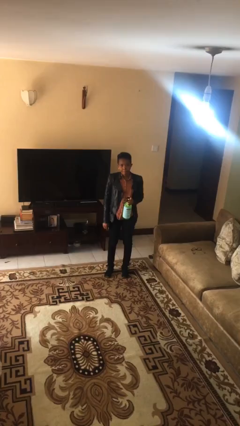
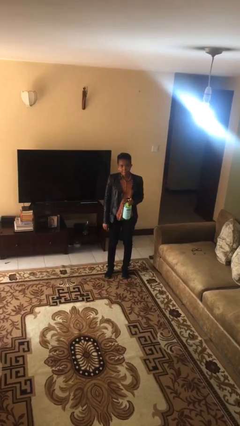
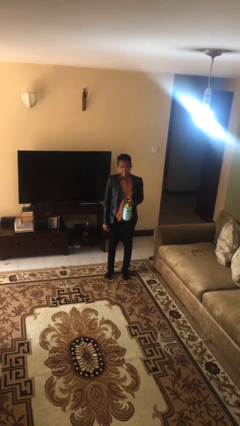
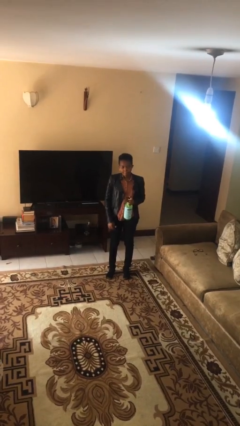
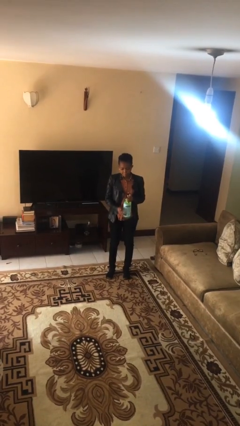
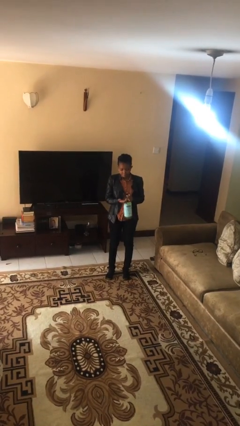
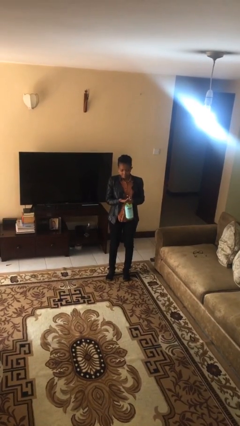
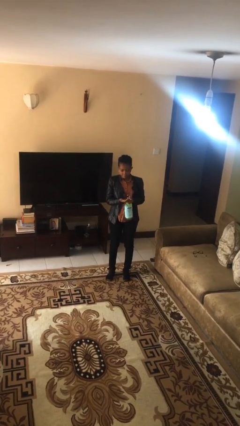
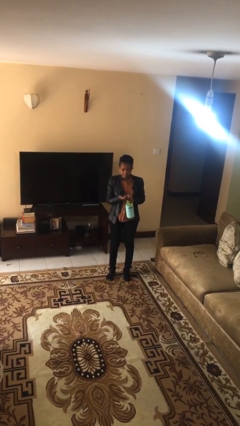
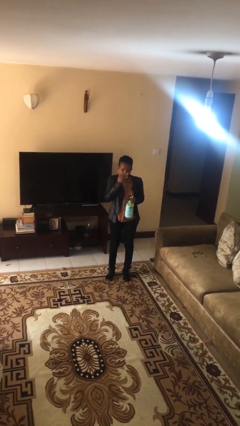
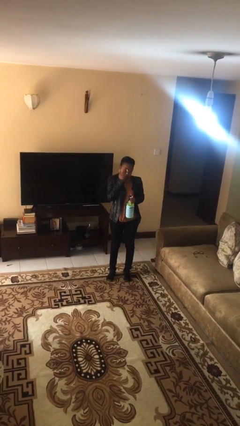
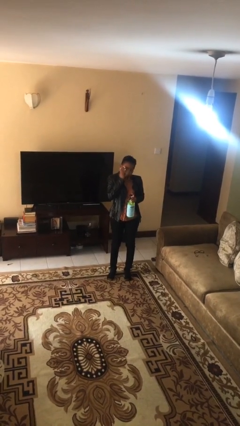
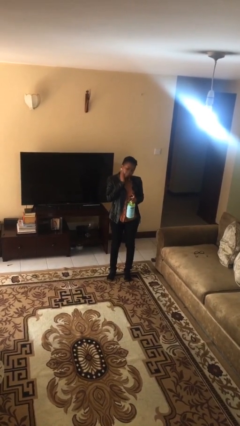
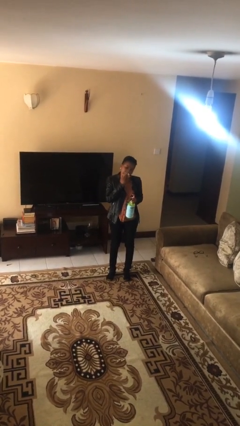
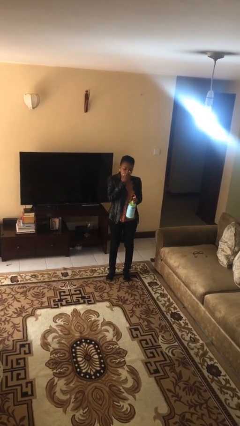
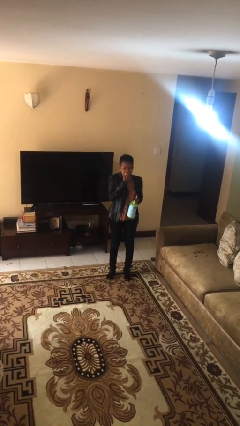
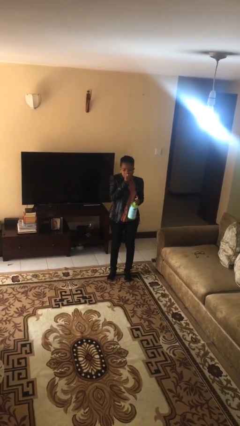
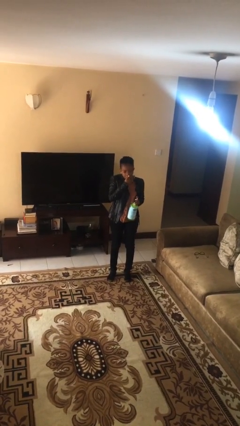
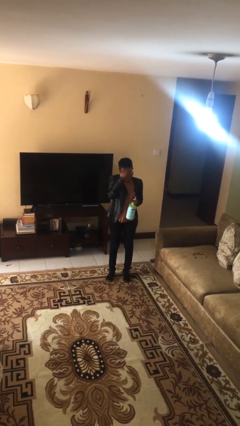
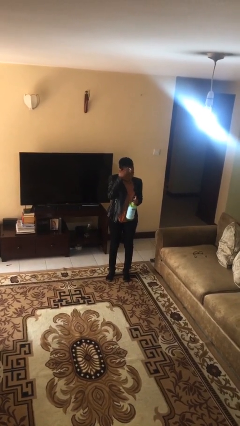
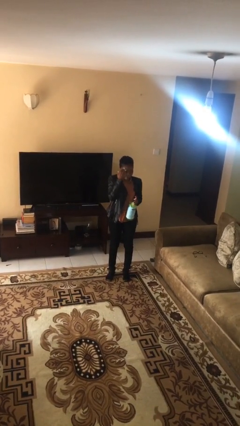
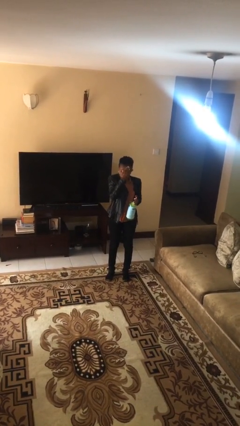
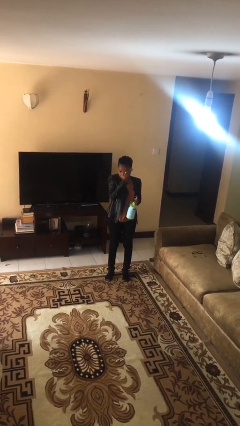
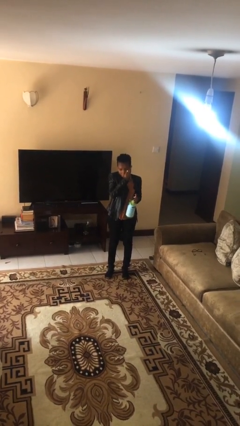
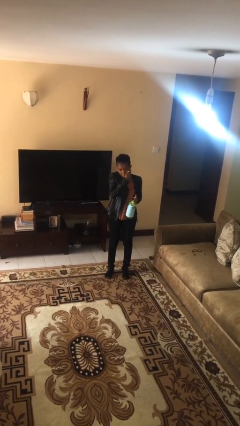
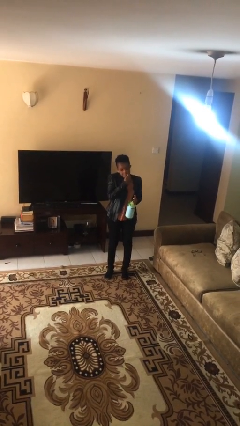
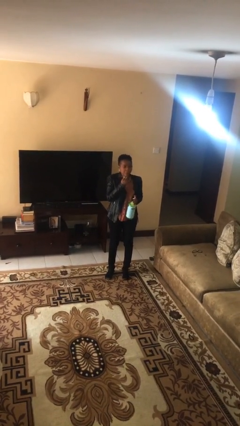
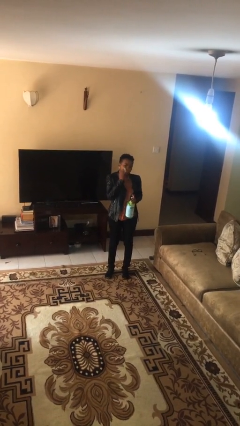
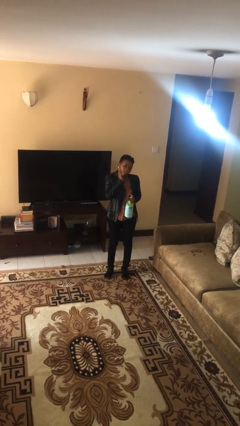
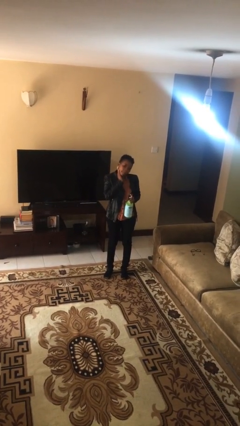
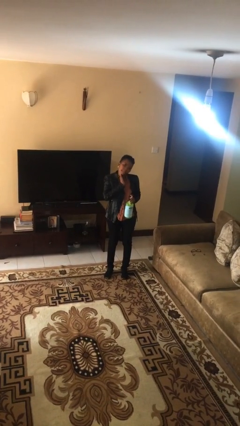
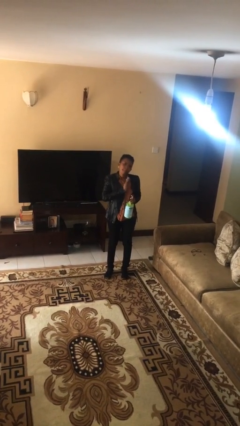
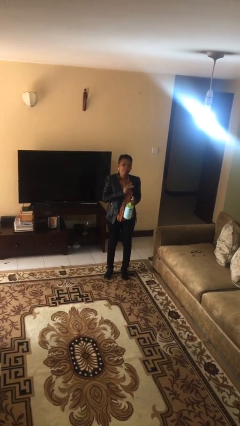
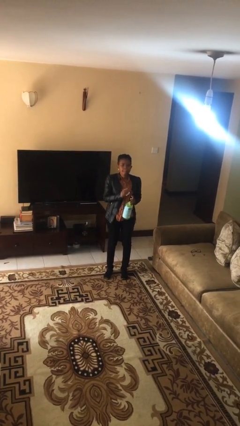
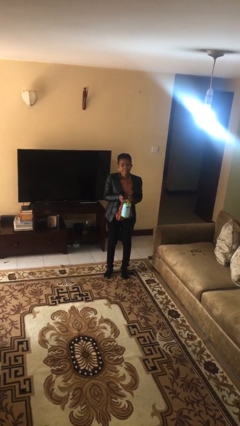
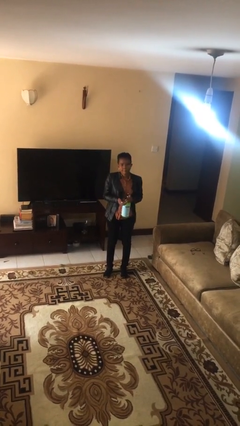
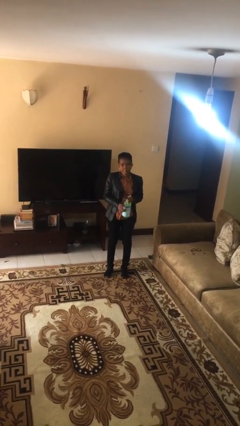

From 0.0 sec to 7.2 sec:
person applies facial moisturizer

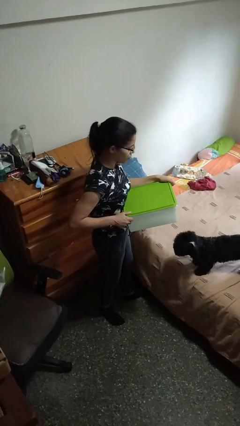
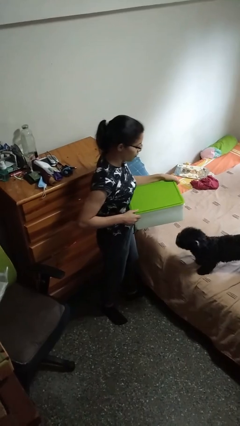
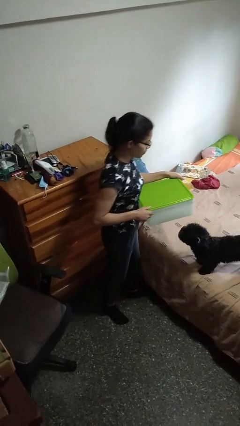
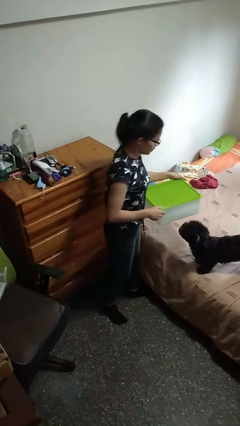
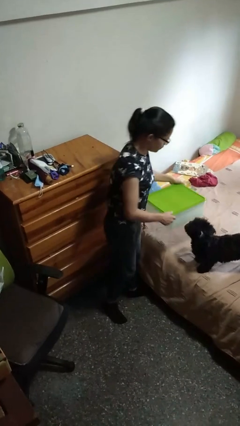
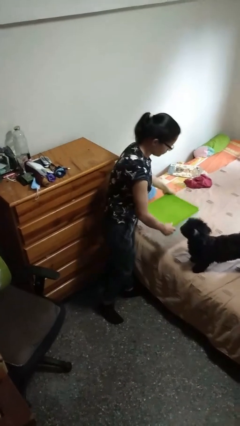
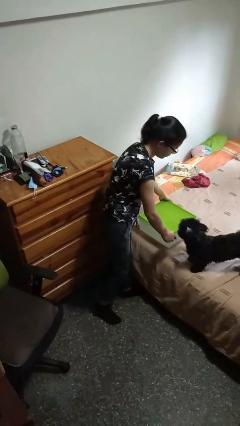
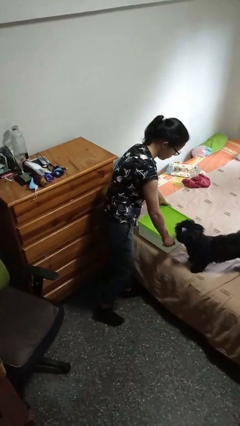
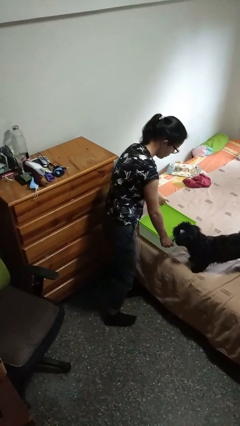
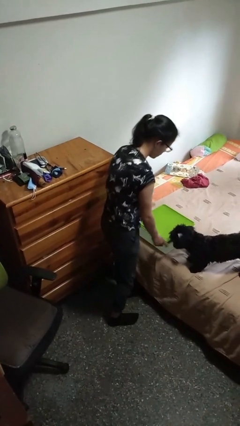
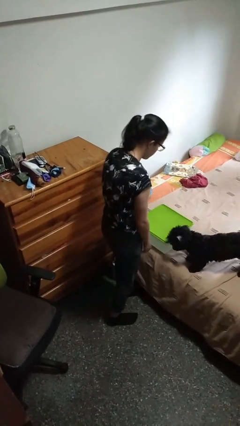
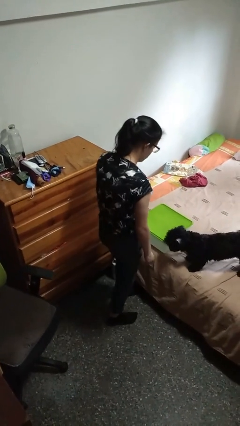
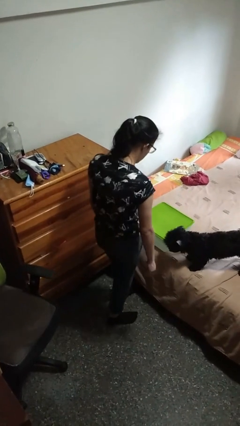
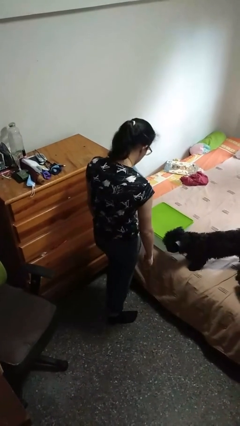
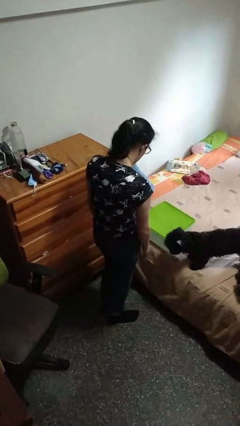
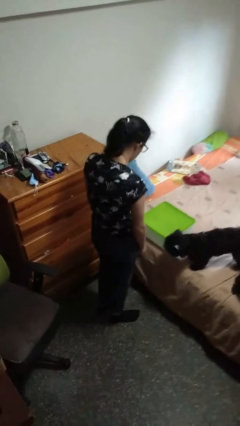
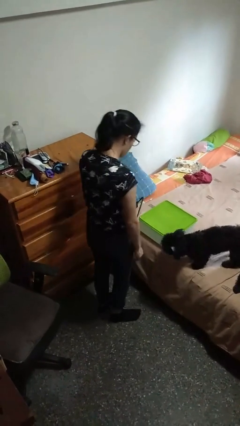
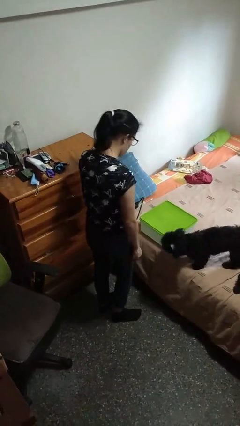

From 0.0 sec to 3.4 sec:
person puts down object on bed

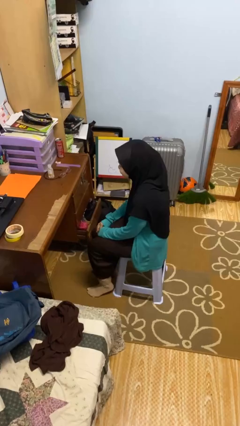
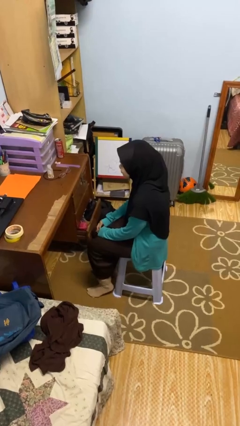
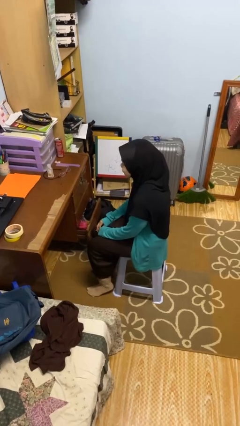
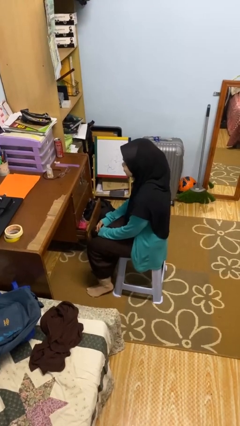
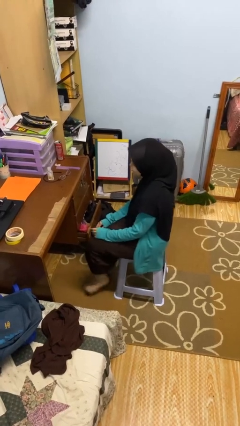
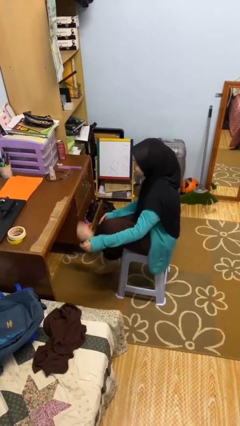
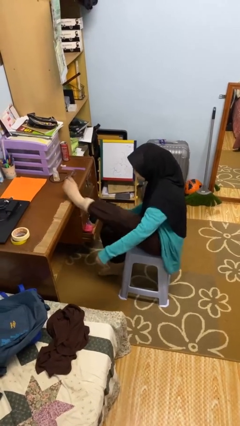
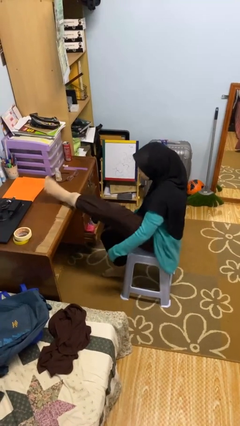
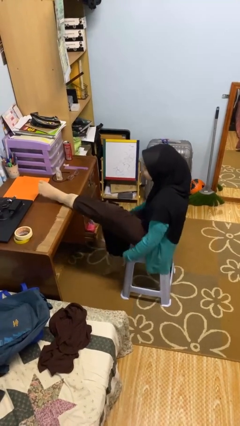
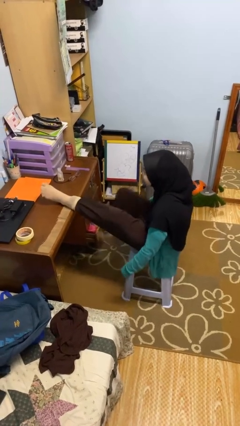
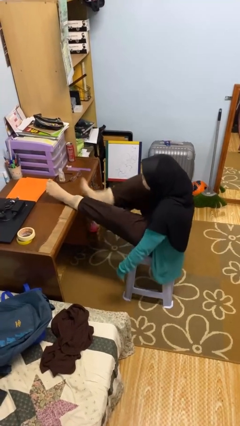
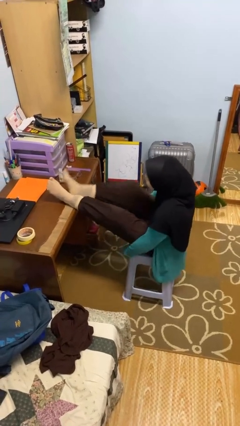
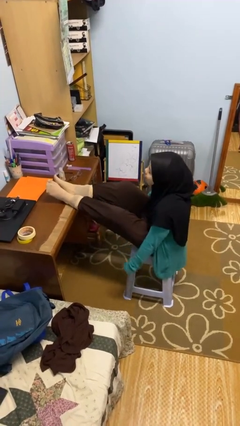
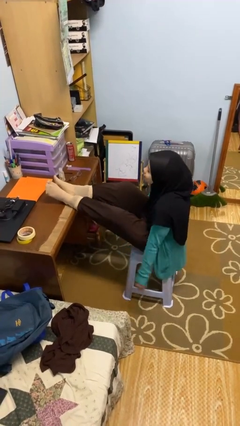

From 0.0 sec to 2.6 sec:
person puts feet up

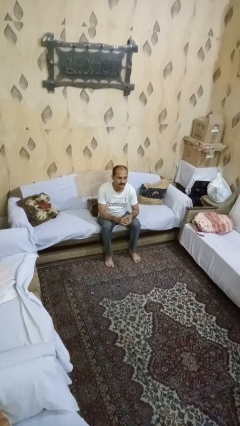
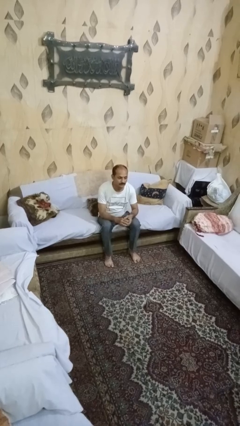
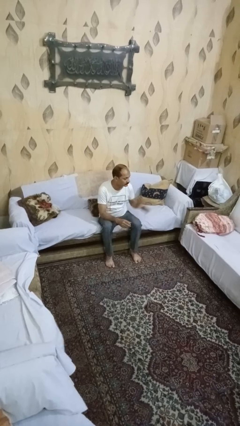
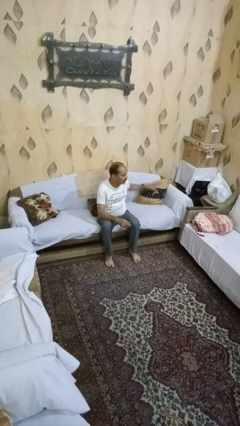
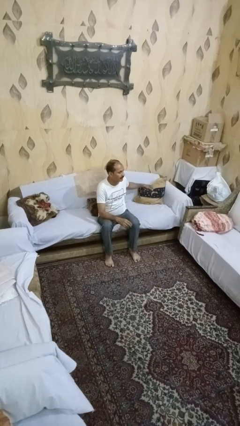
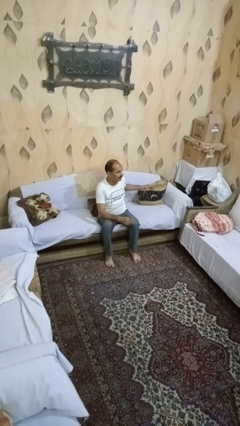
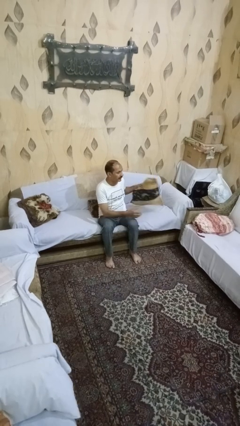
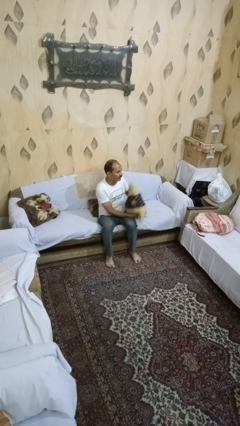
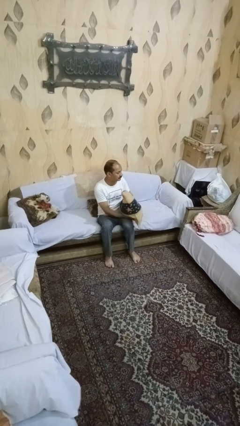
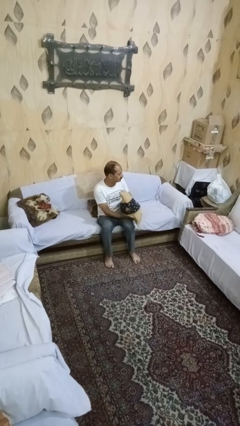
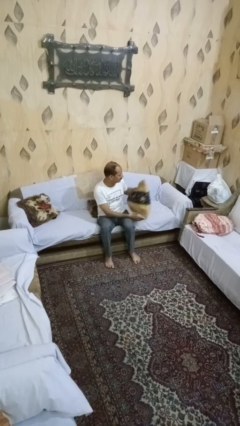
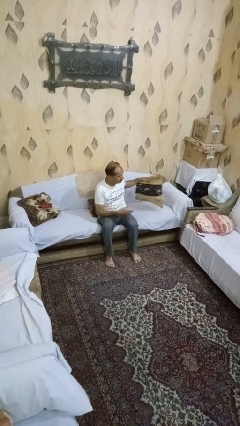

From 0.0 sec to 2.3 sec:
person searches in couch

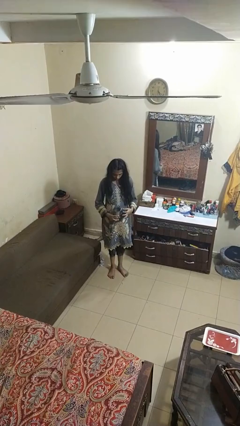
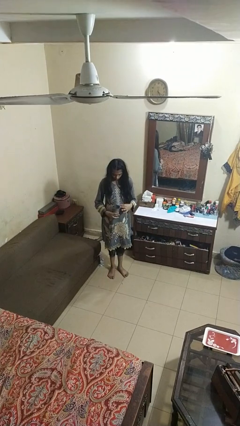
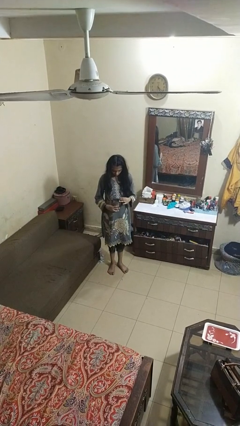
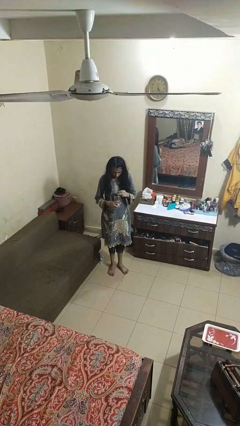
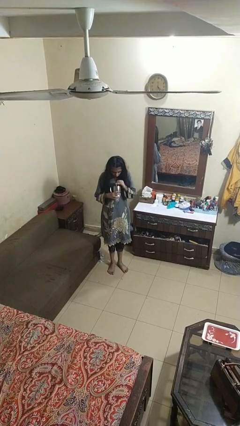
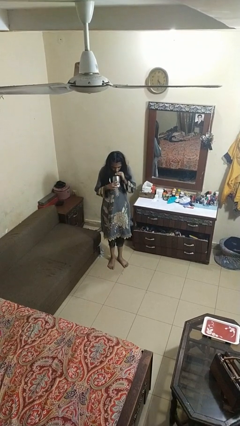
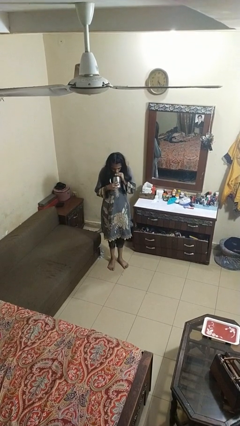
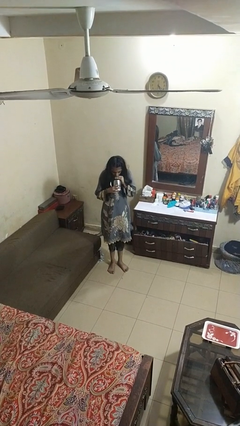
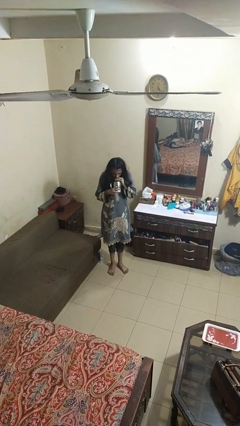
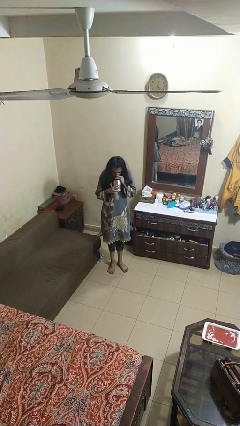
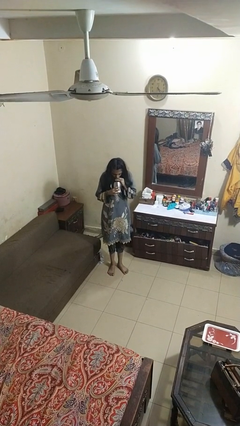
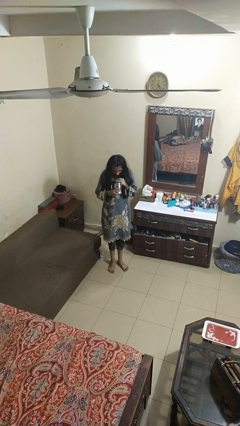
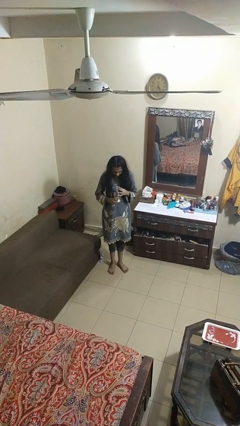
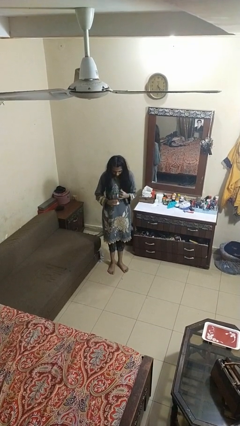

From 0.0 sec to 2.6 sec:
person drinks from straw
